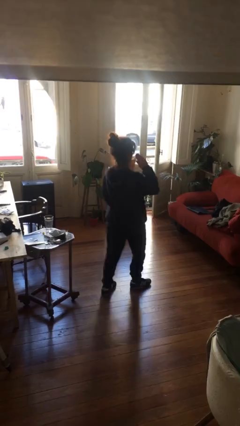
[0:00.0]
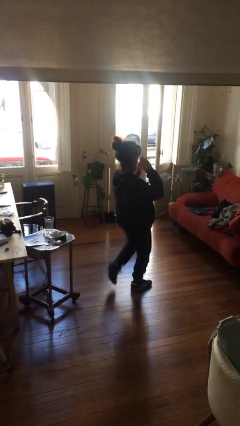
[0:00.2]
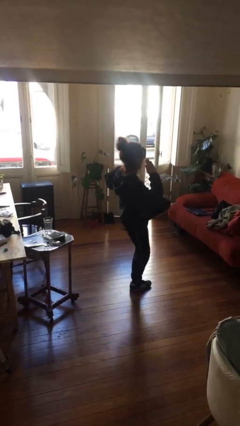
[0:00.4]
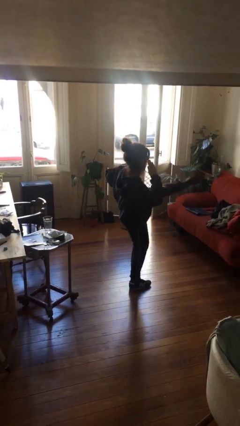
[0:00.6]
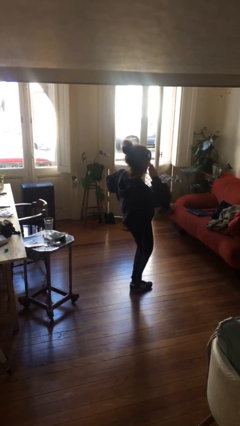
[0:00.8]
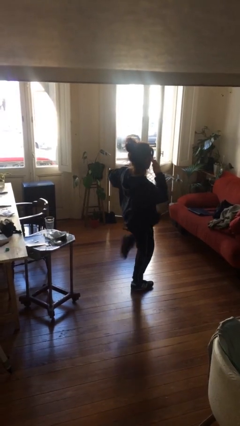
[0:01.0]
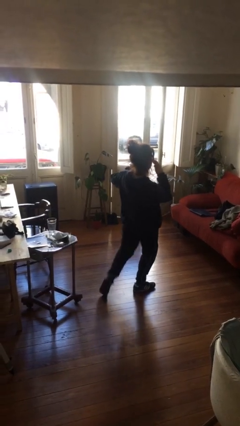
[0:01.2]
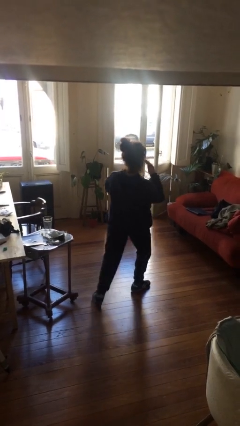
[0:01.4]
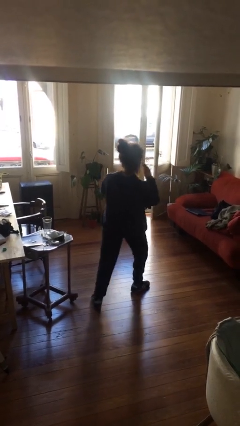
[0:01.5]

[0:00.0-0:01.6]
person karate kicks

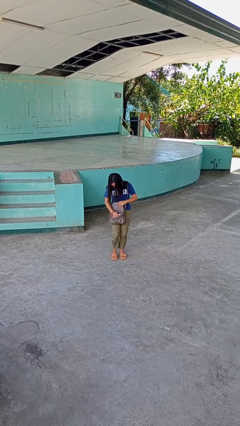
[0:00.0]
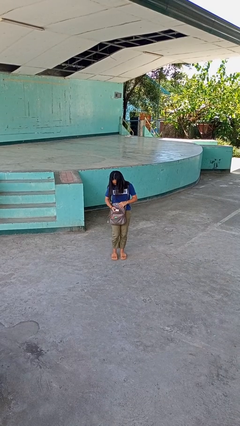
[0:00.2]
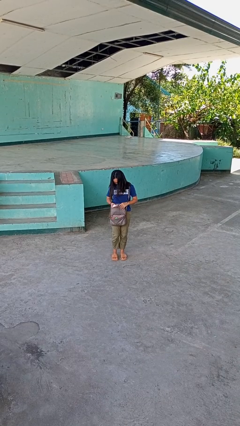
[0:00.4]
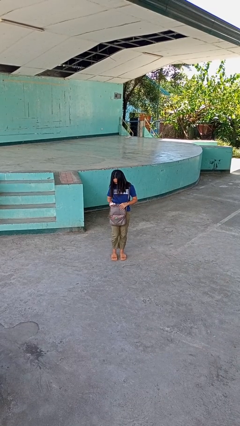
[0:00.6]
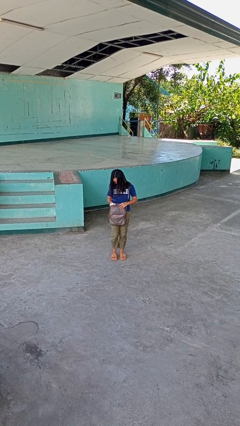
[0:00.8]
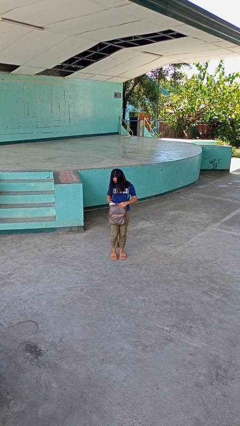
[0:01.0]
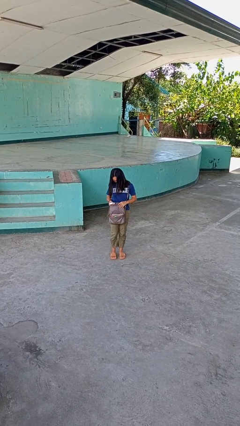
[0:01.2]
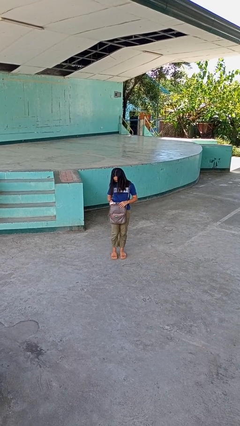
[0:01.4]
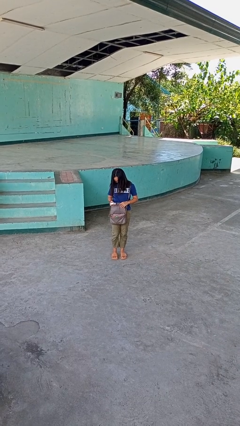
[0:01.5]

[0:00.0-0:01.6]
person takes object from purse

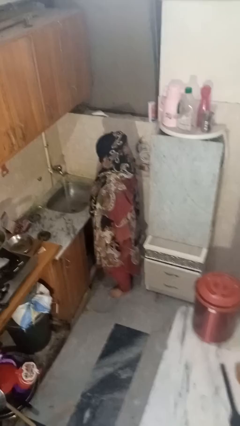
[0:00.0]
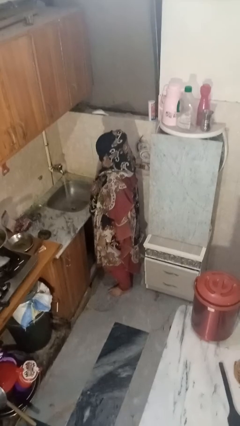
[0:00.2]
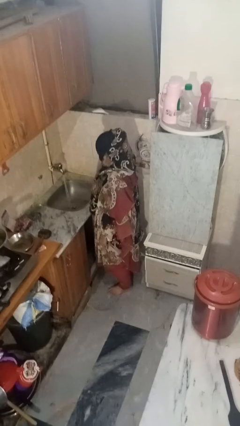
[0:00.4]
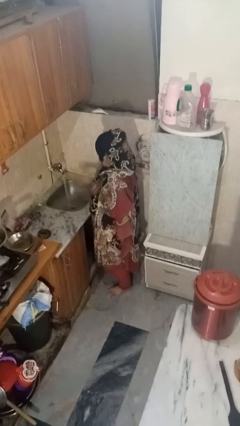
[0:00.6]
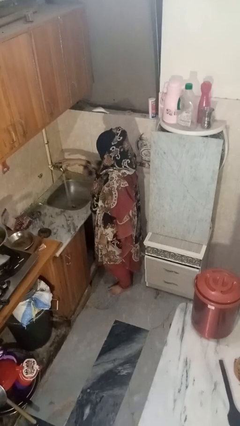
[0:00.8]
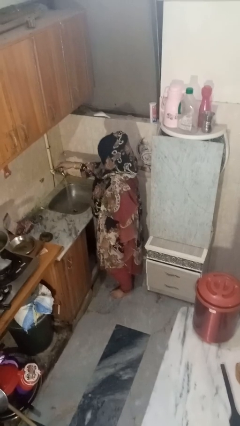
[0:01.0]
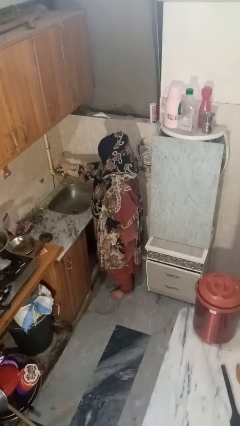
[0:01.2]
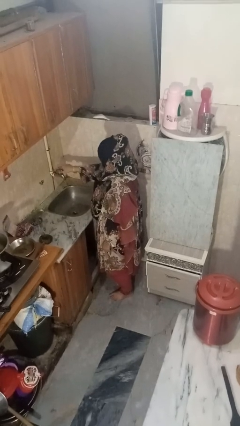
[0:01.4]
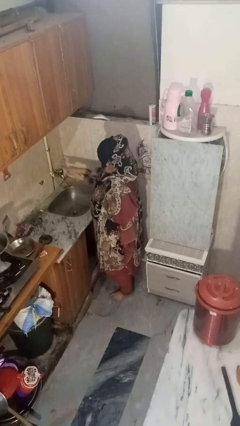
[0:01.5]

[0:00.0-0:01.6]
person turns off faucet

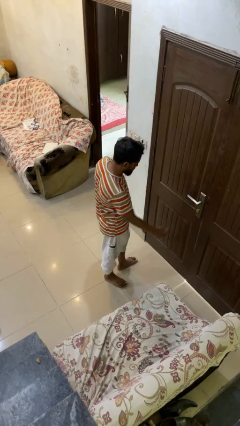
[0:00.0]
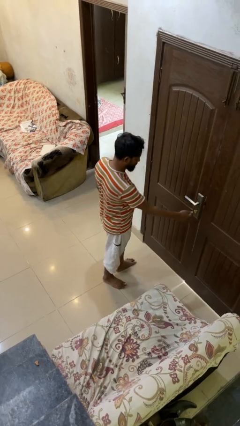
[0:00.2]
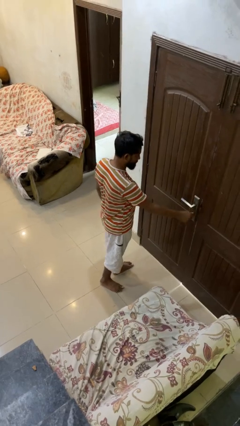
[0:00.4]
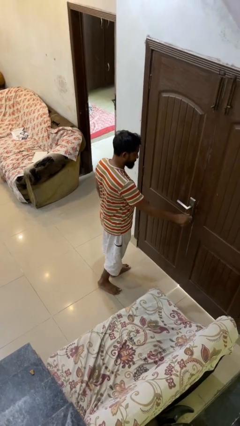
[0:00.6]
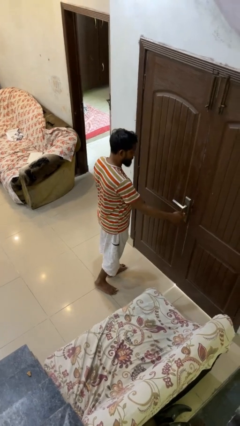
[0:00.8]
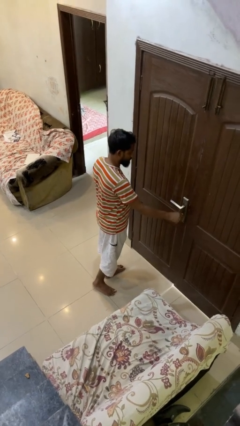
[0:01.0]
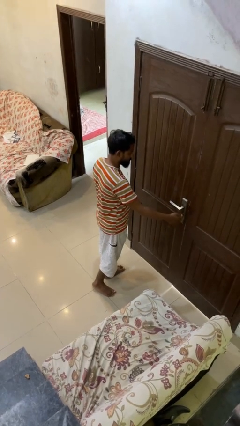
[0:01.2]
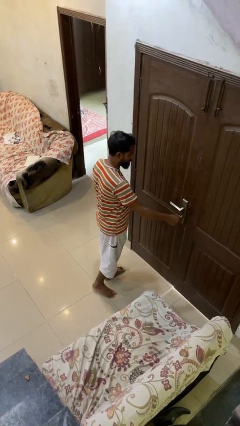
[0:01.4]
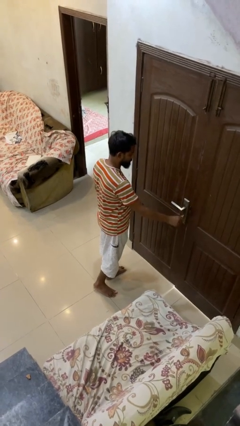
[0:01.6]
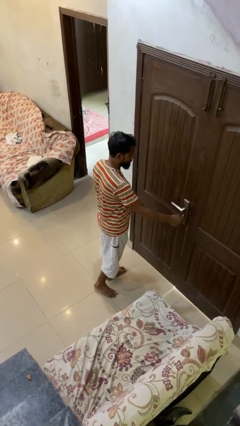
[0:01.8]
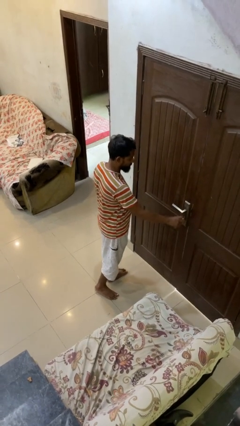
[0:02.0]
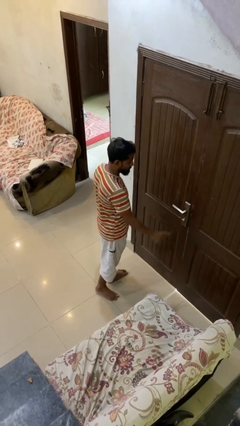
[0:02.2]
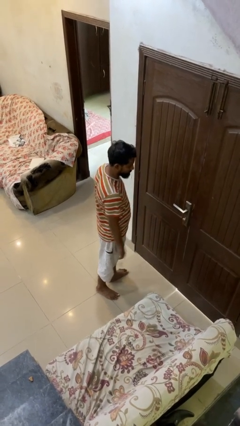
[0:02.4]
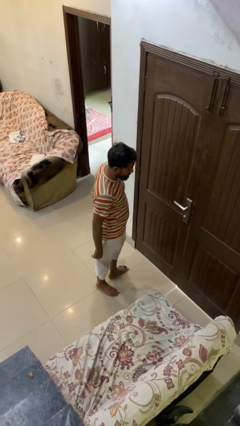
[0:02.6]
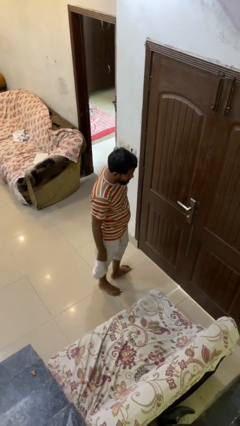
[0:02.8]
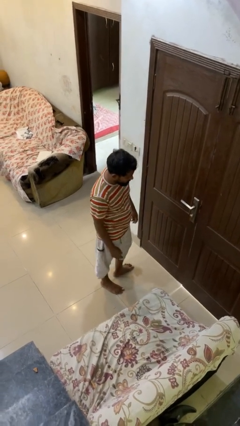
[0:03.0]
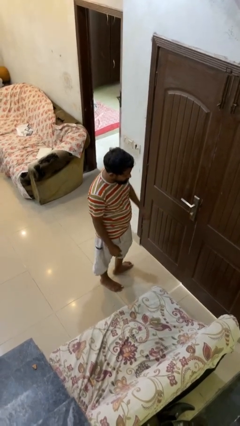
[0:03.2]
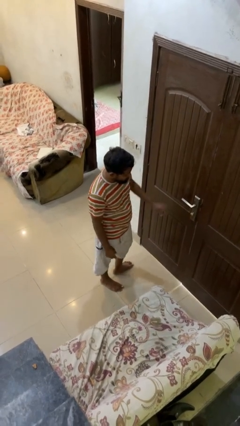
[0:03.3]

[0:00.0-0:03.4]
person unlocks door with keys

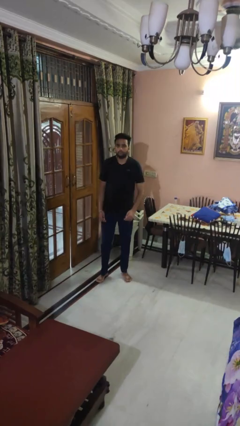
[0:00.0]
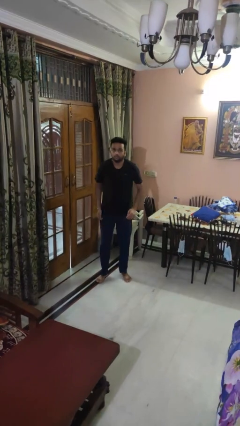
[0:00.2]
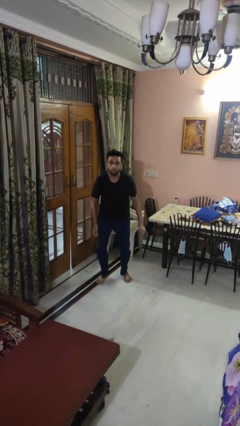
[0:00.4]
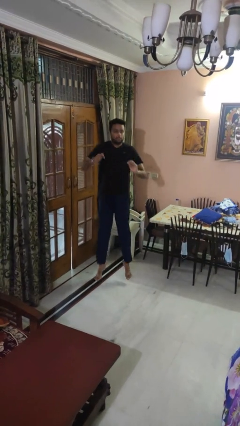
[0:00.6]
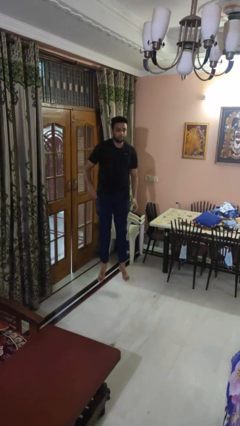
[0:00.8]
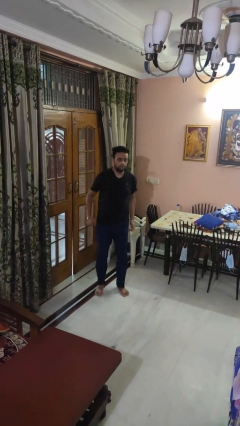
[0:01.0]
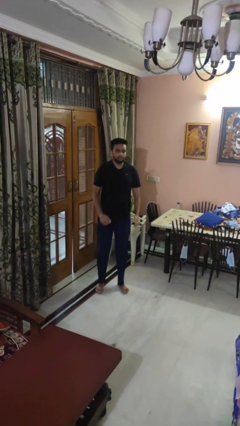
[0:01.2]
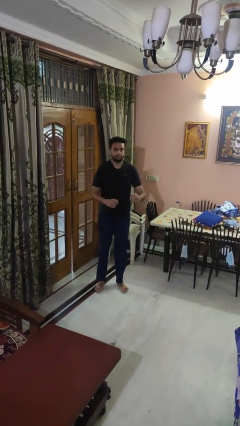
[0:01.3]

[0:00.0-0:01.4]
person jumps

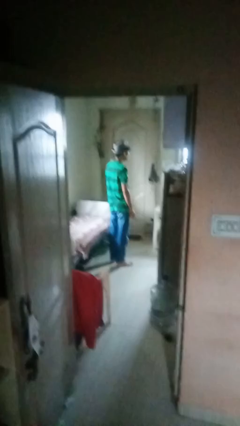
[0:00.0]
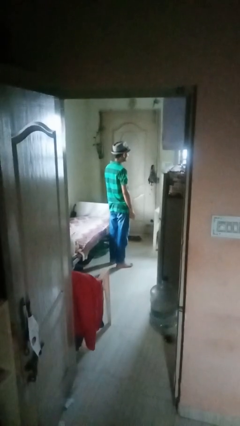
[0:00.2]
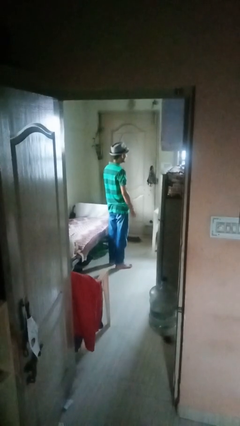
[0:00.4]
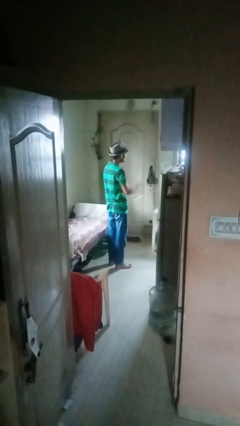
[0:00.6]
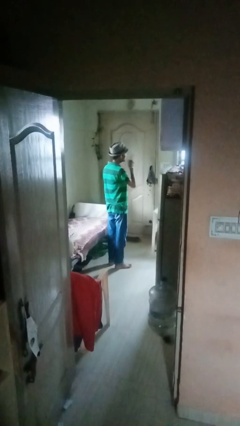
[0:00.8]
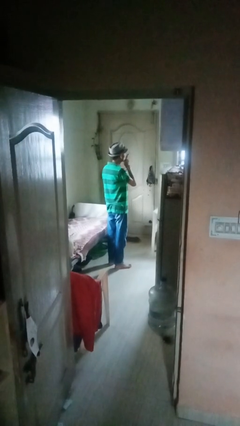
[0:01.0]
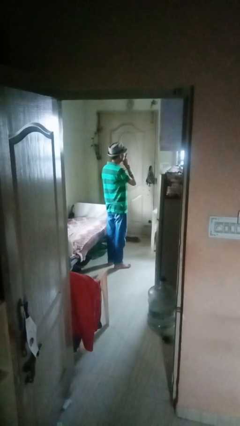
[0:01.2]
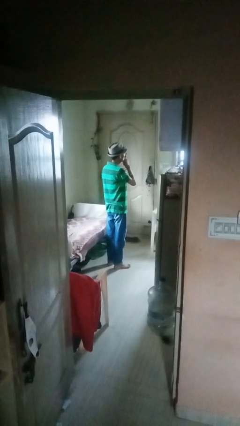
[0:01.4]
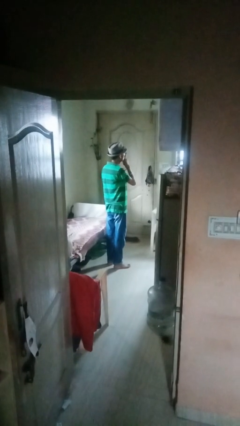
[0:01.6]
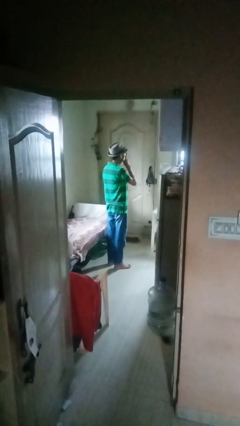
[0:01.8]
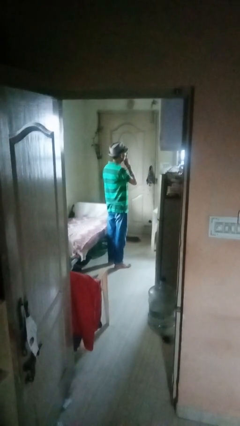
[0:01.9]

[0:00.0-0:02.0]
person gestures be quiet

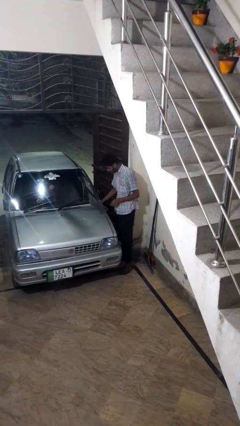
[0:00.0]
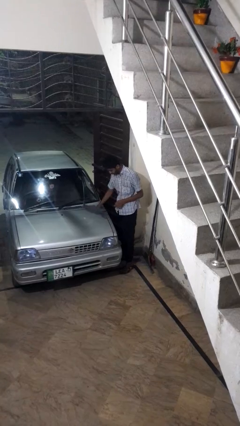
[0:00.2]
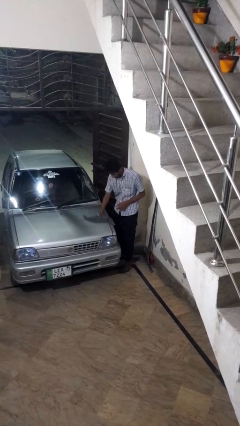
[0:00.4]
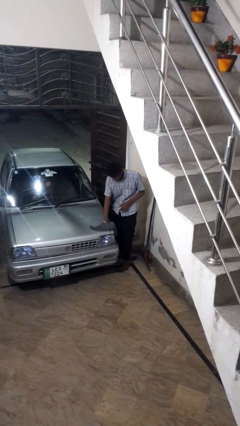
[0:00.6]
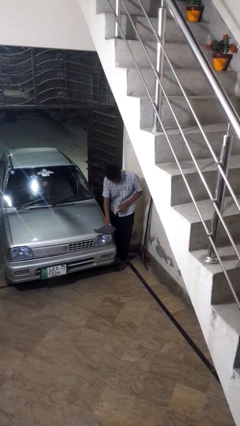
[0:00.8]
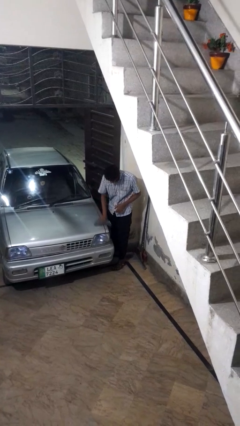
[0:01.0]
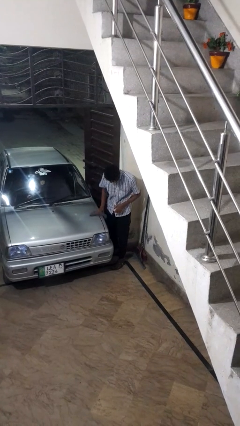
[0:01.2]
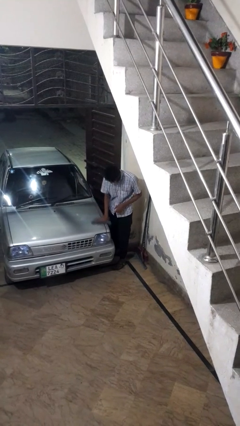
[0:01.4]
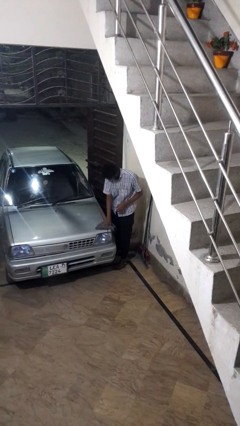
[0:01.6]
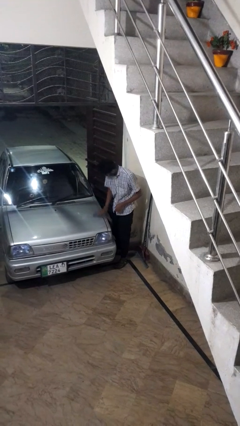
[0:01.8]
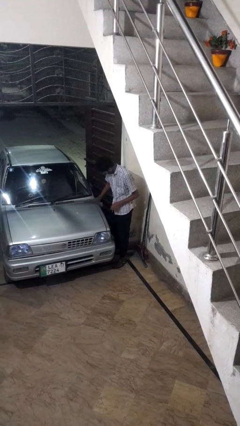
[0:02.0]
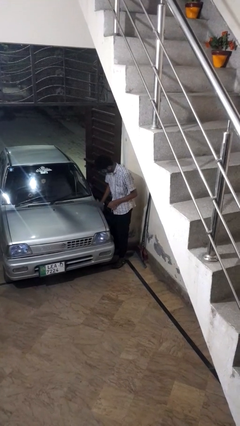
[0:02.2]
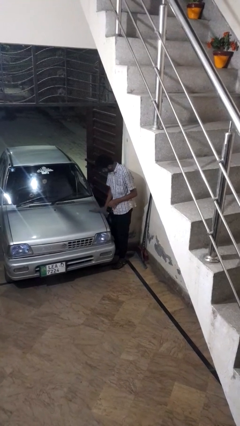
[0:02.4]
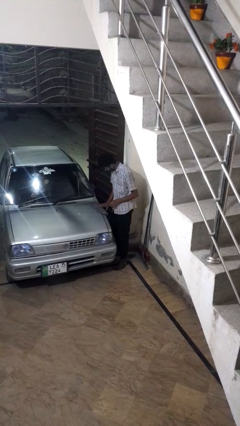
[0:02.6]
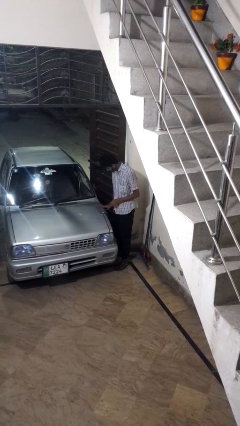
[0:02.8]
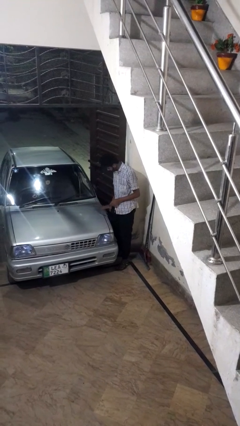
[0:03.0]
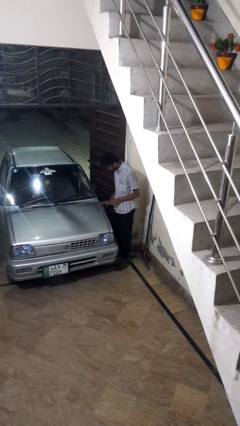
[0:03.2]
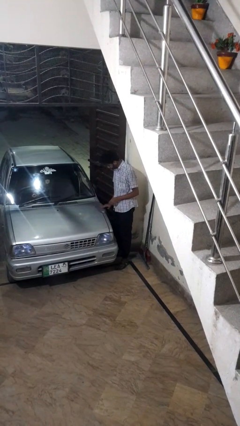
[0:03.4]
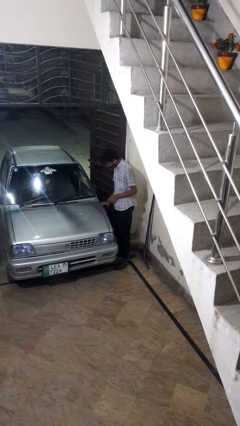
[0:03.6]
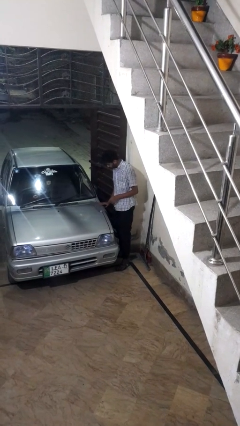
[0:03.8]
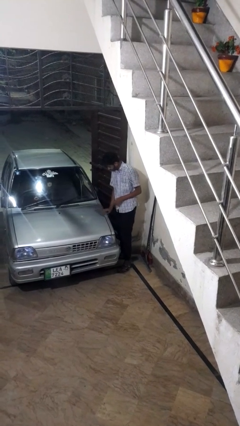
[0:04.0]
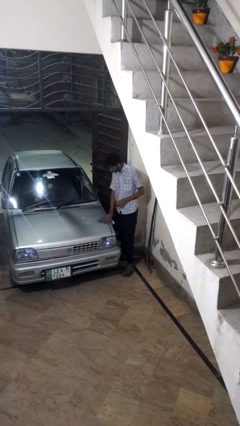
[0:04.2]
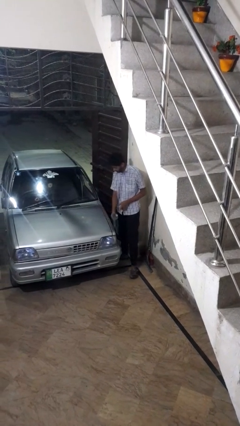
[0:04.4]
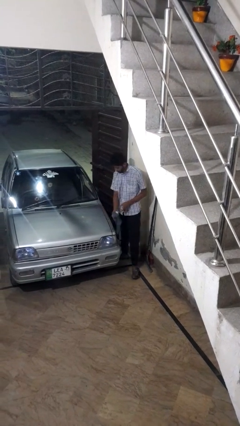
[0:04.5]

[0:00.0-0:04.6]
person polishes car with rag

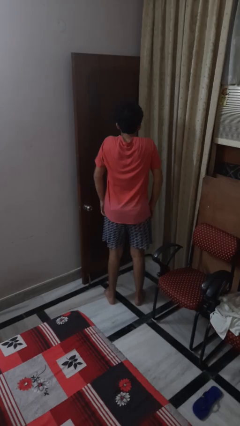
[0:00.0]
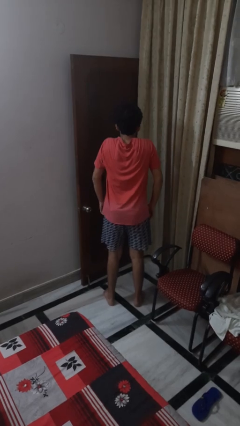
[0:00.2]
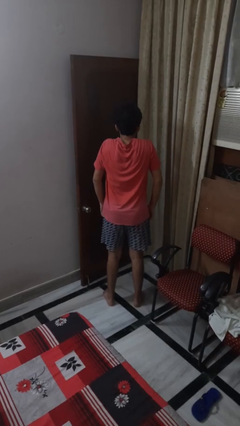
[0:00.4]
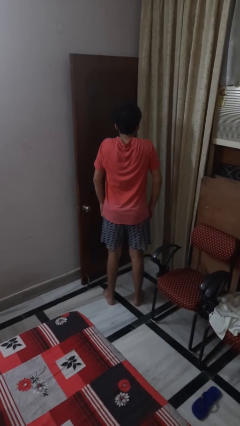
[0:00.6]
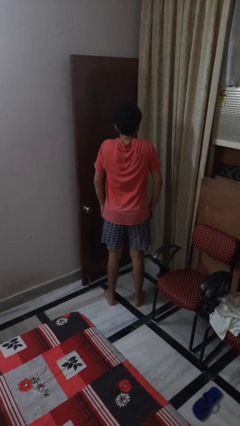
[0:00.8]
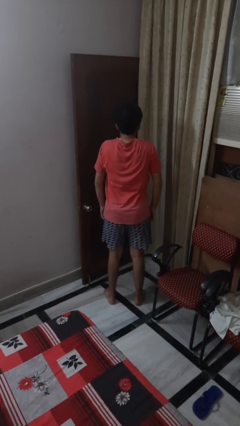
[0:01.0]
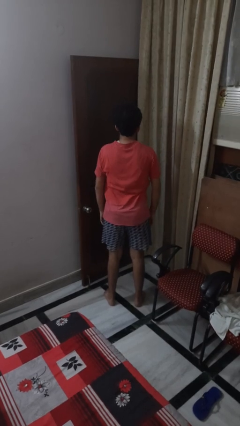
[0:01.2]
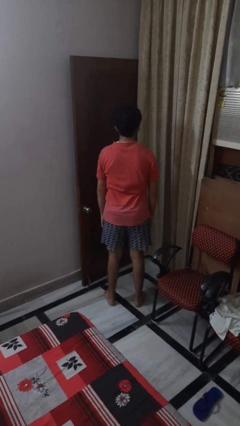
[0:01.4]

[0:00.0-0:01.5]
person shrugs
